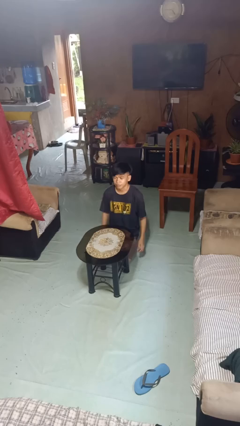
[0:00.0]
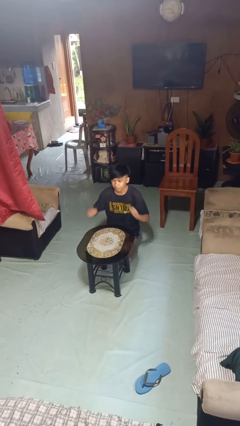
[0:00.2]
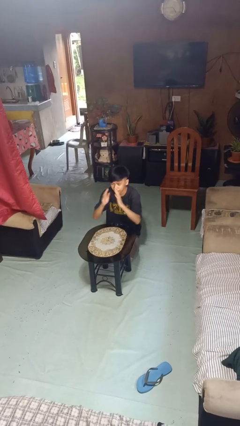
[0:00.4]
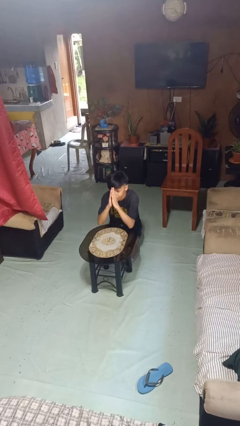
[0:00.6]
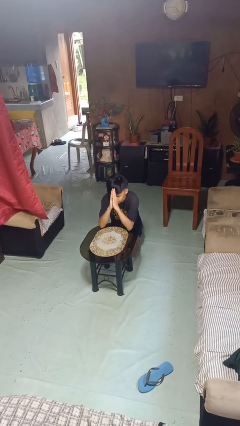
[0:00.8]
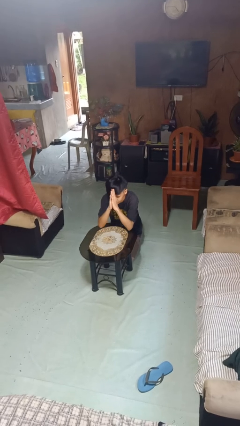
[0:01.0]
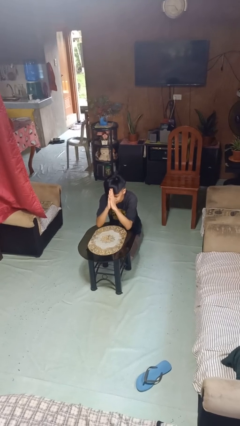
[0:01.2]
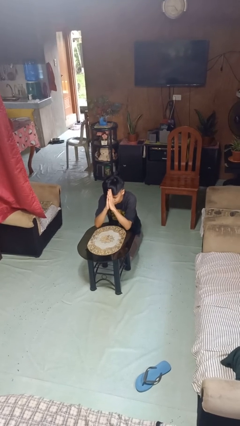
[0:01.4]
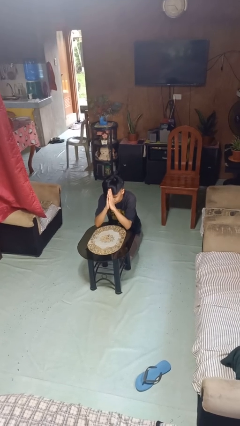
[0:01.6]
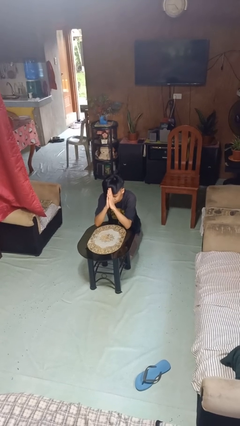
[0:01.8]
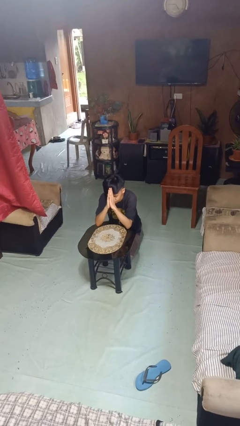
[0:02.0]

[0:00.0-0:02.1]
person prays

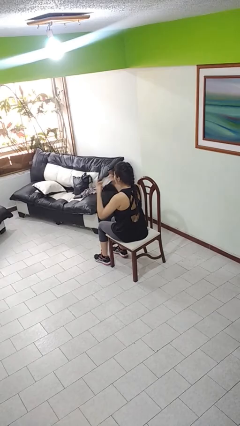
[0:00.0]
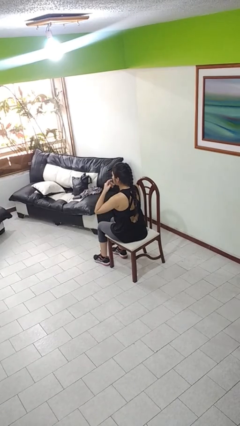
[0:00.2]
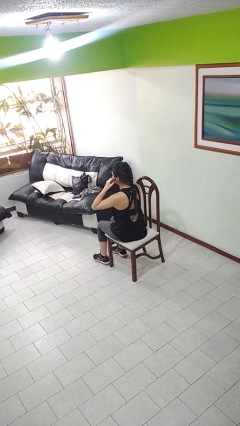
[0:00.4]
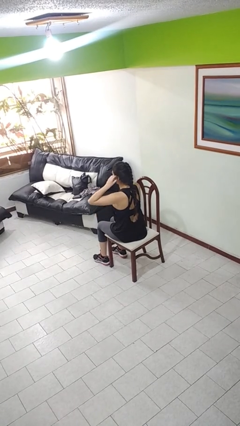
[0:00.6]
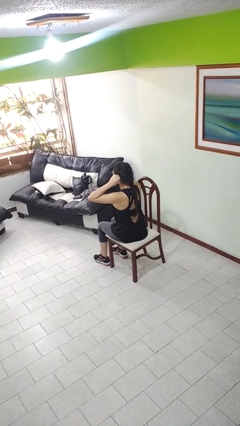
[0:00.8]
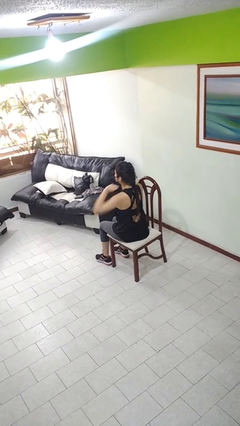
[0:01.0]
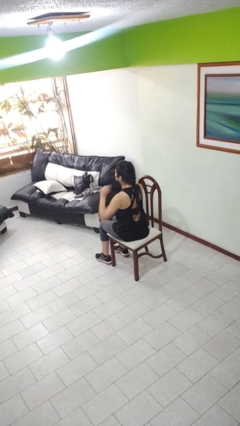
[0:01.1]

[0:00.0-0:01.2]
person puts on facemask

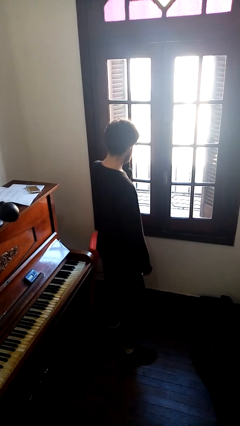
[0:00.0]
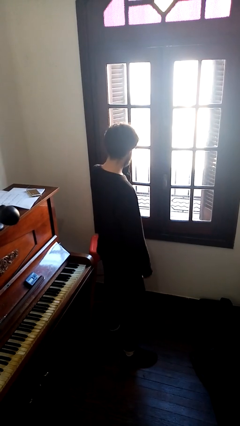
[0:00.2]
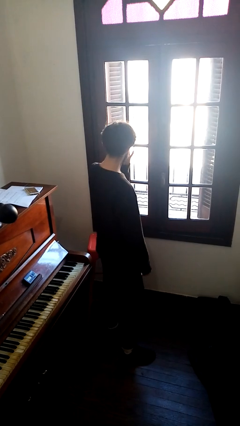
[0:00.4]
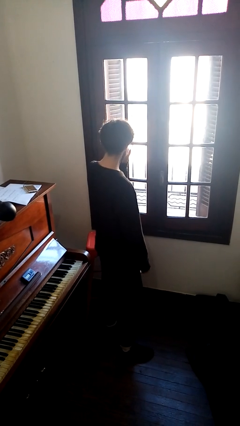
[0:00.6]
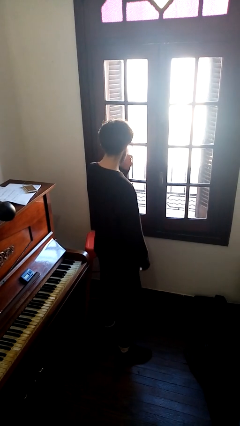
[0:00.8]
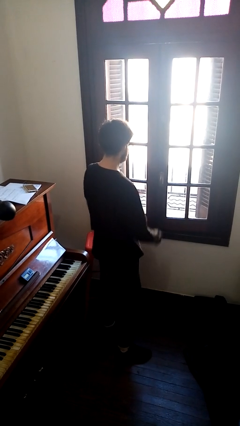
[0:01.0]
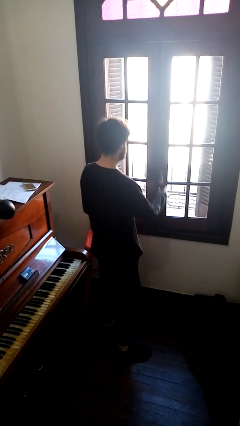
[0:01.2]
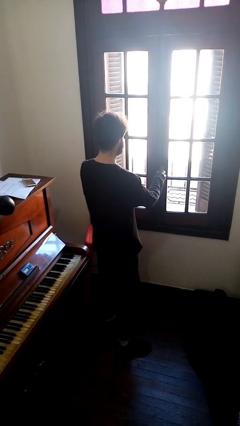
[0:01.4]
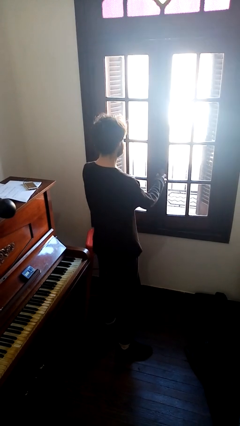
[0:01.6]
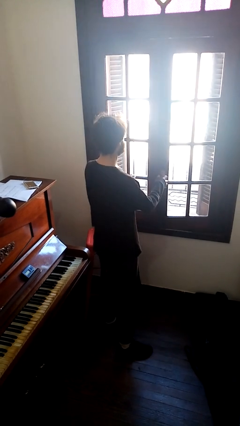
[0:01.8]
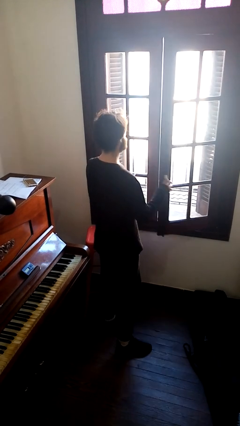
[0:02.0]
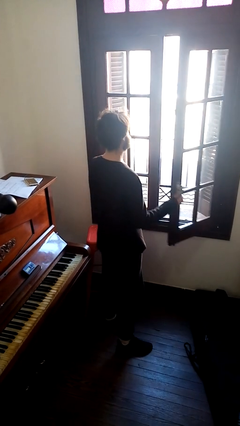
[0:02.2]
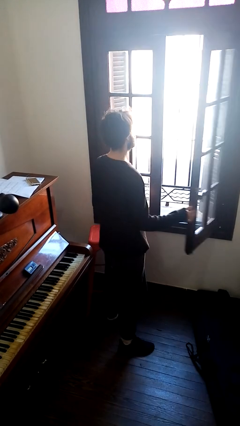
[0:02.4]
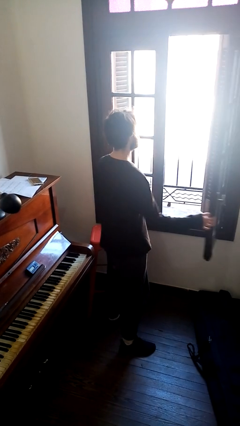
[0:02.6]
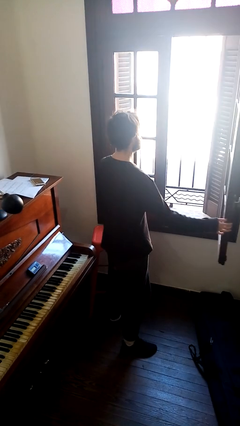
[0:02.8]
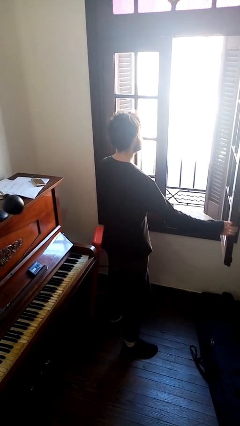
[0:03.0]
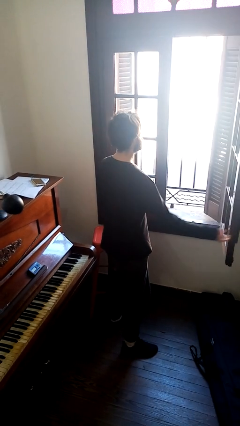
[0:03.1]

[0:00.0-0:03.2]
person opens home window

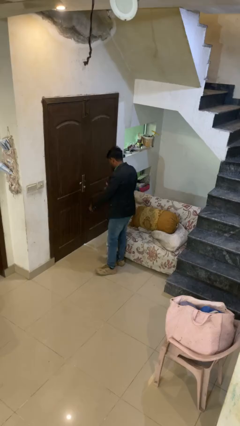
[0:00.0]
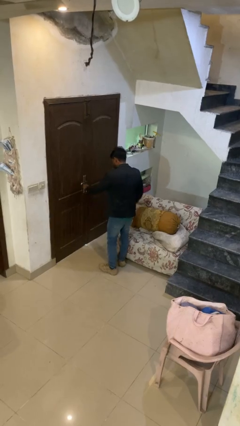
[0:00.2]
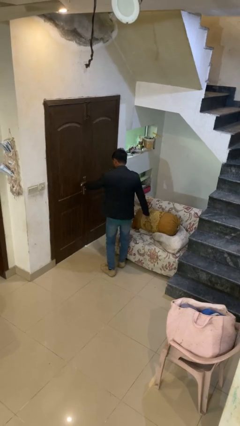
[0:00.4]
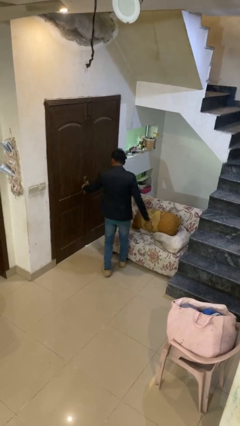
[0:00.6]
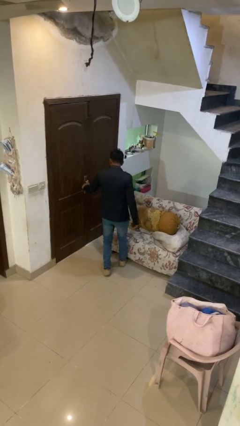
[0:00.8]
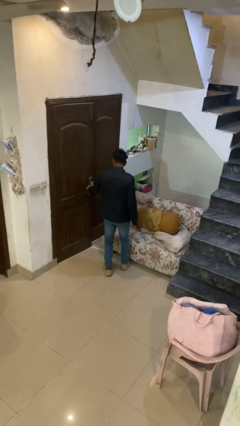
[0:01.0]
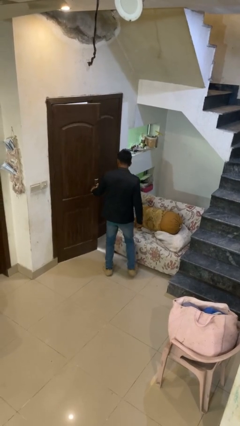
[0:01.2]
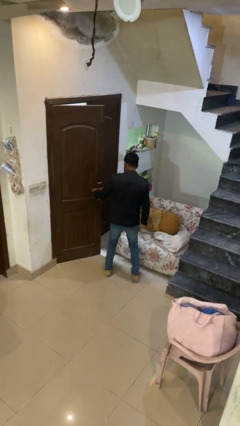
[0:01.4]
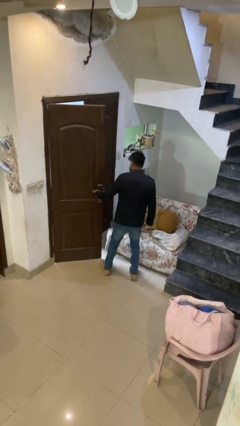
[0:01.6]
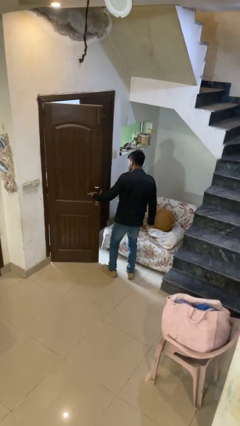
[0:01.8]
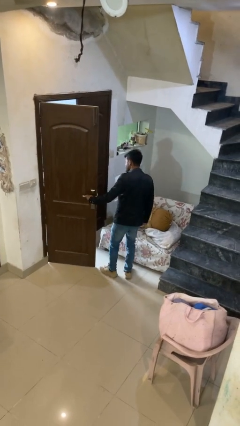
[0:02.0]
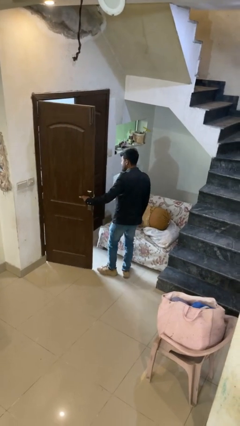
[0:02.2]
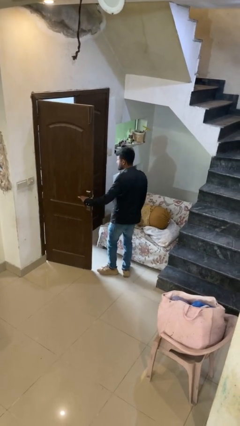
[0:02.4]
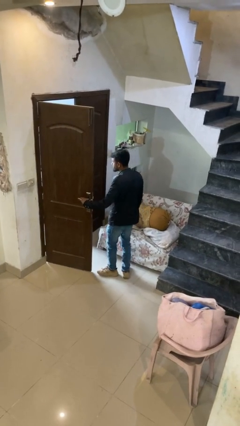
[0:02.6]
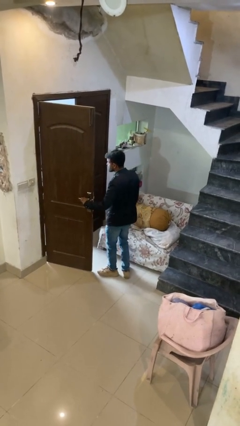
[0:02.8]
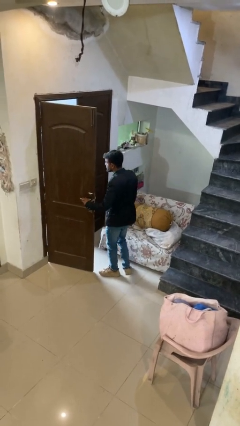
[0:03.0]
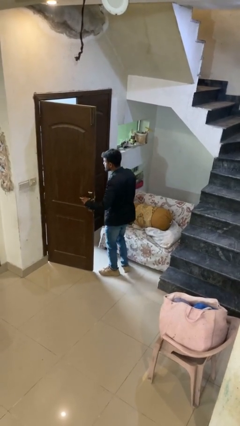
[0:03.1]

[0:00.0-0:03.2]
person opens facility door

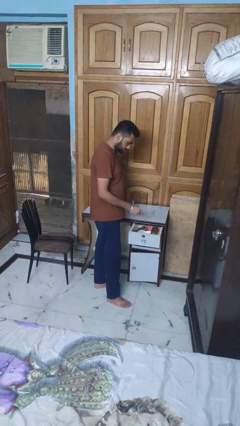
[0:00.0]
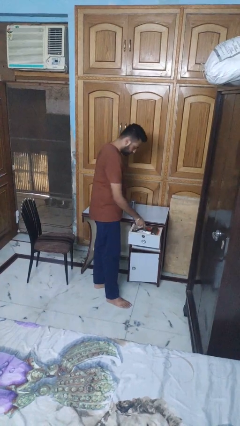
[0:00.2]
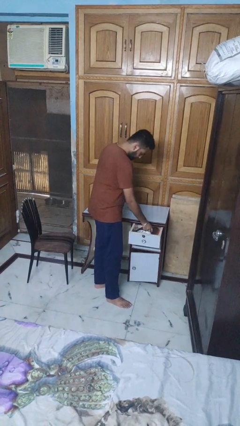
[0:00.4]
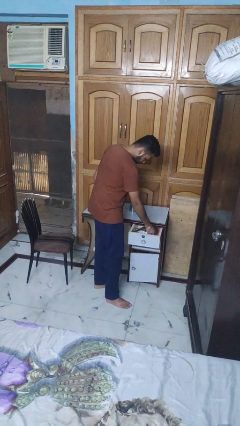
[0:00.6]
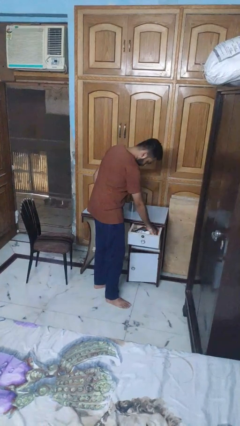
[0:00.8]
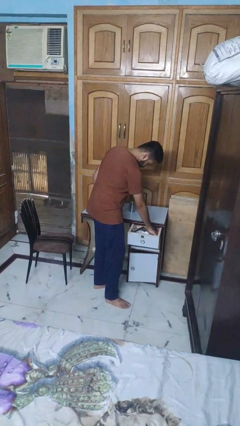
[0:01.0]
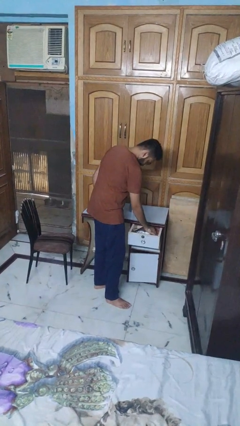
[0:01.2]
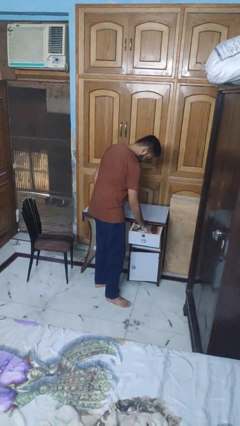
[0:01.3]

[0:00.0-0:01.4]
person puts object into kitchen drawer

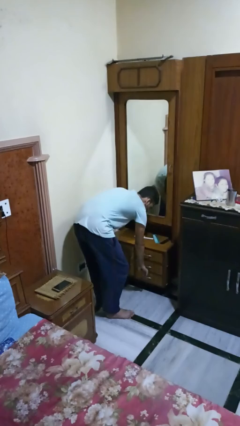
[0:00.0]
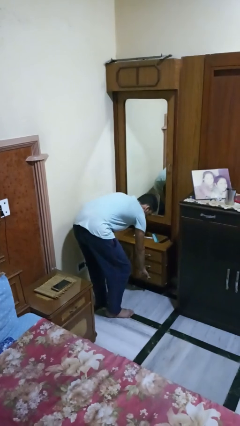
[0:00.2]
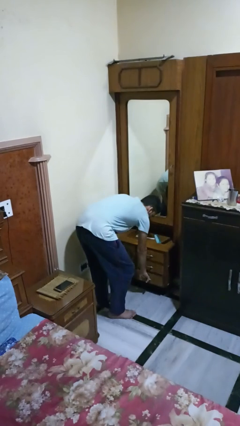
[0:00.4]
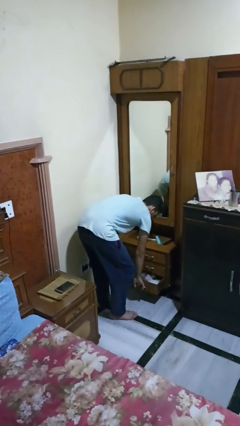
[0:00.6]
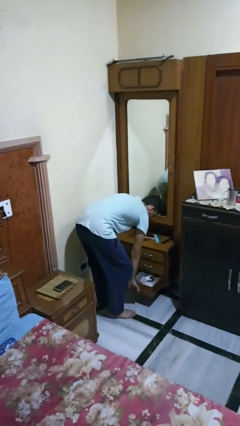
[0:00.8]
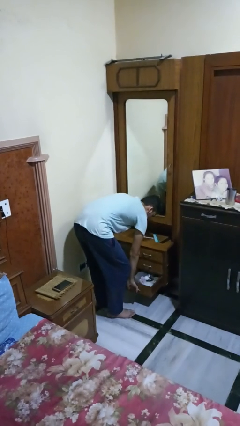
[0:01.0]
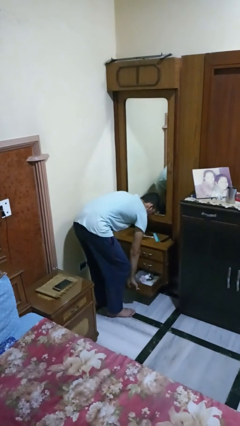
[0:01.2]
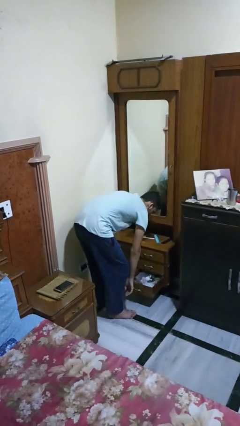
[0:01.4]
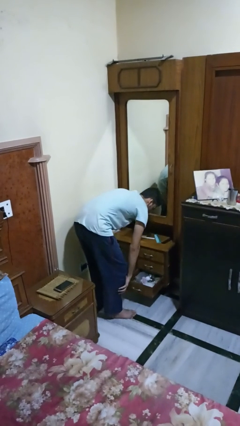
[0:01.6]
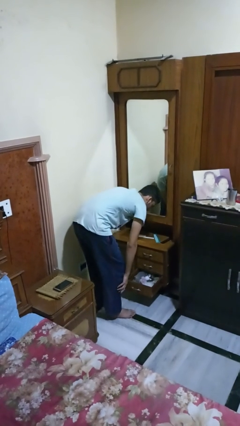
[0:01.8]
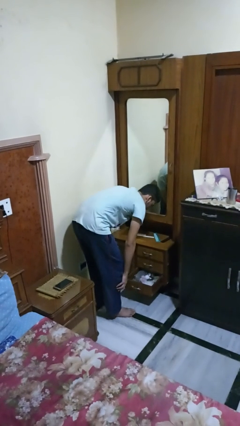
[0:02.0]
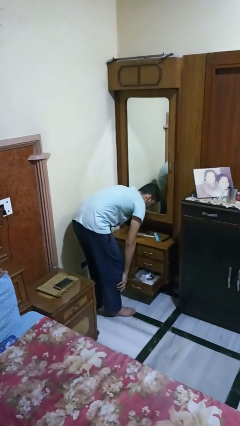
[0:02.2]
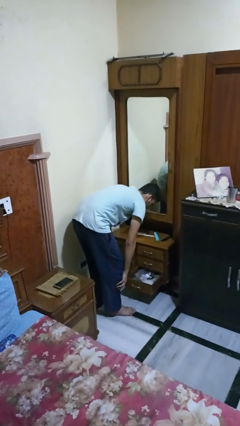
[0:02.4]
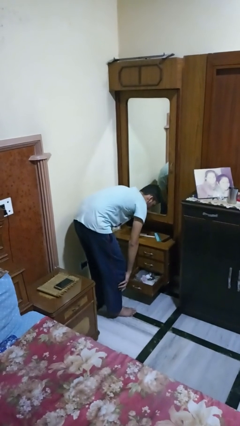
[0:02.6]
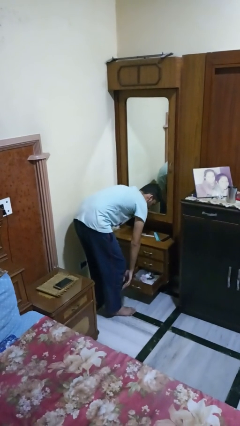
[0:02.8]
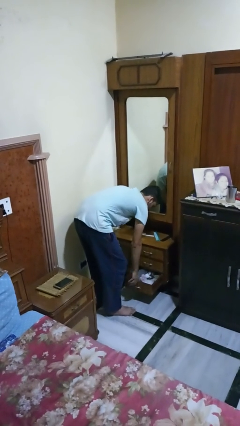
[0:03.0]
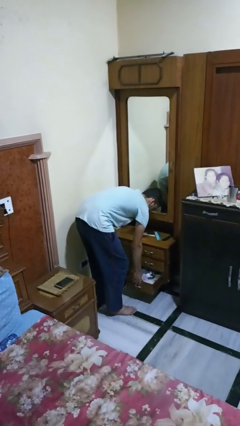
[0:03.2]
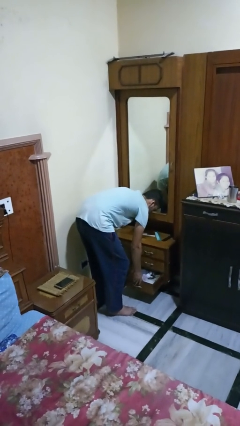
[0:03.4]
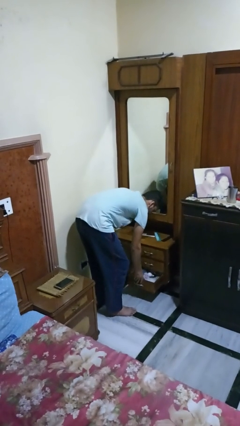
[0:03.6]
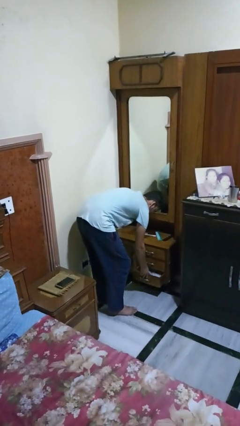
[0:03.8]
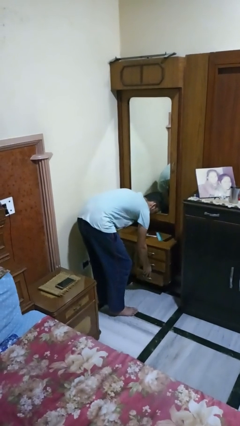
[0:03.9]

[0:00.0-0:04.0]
person opens dresser drawer

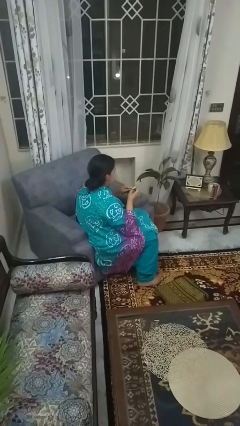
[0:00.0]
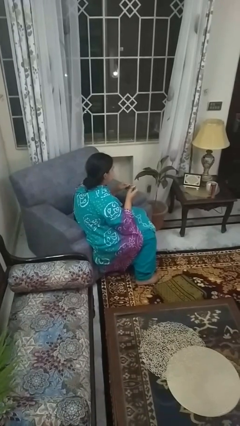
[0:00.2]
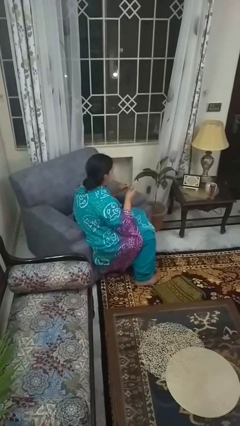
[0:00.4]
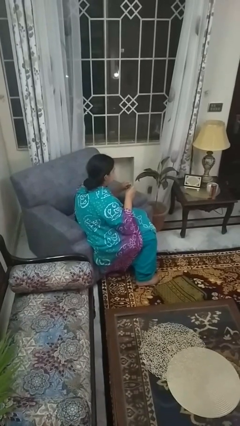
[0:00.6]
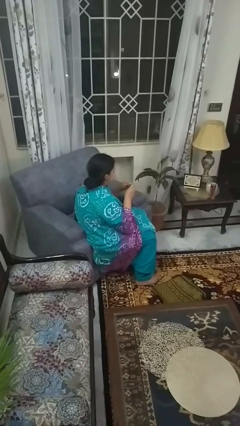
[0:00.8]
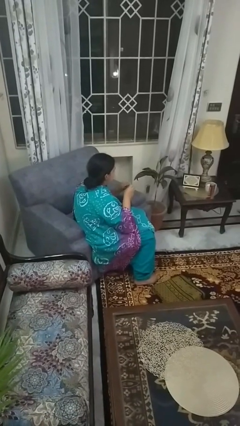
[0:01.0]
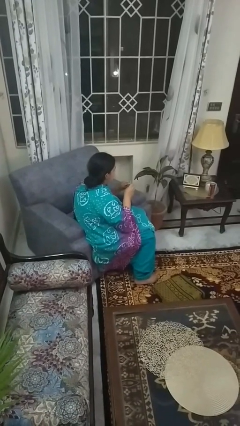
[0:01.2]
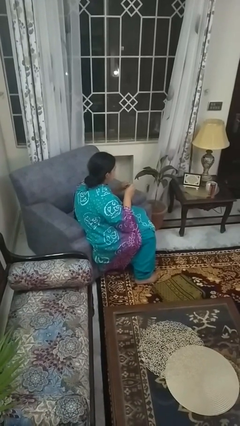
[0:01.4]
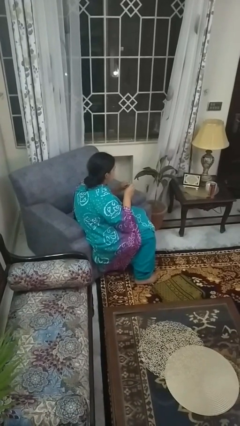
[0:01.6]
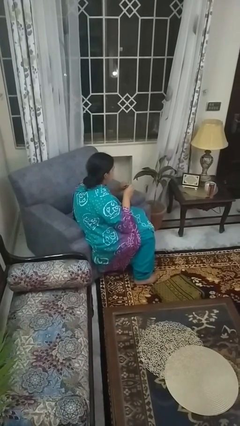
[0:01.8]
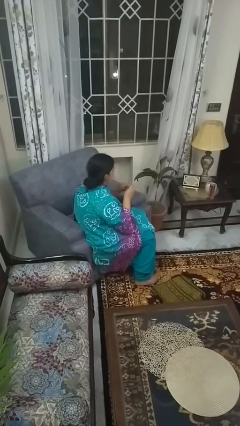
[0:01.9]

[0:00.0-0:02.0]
person files fingernails

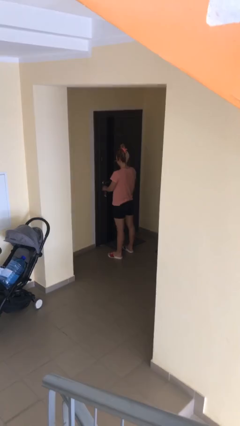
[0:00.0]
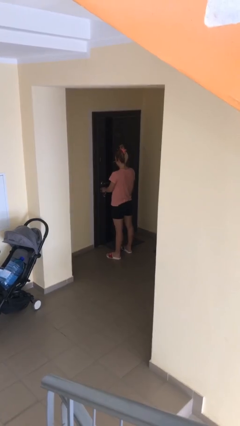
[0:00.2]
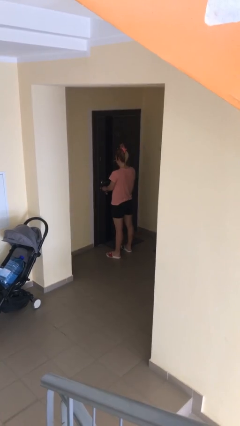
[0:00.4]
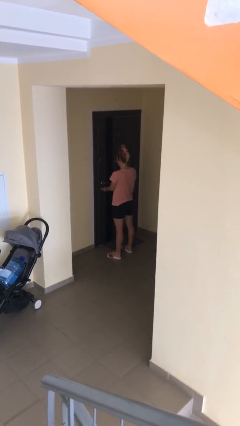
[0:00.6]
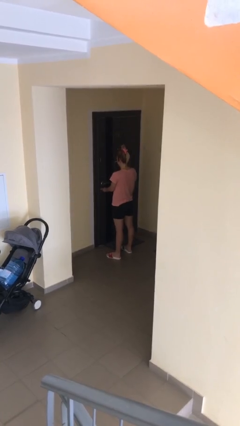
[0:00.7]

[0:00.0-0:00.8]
person locks door with keys
